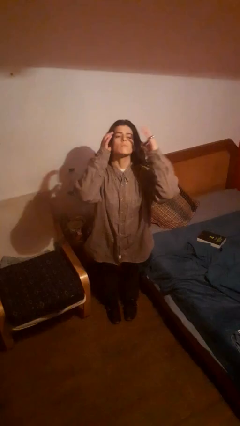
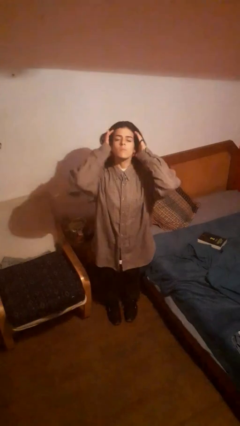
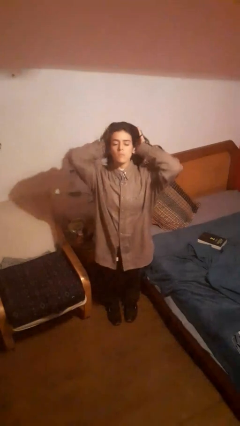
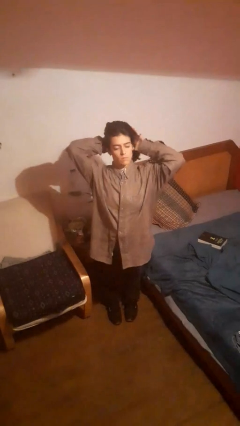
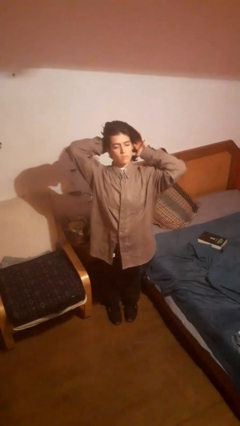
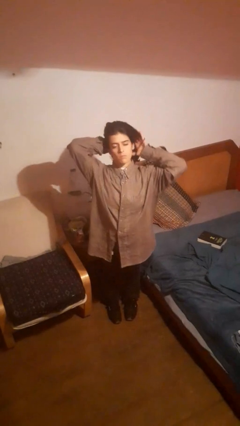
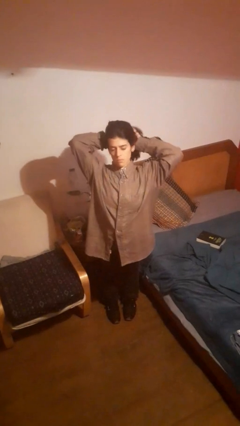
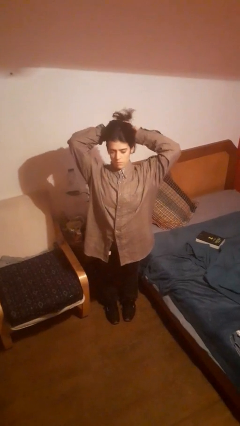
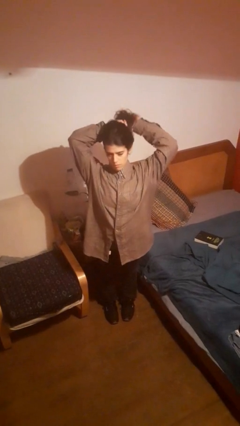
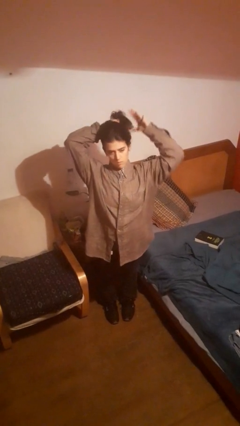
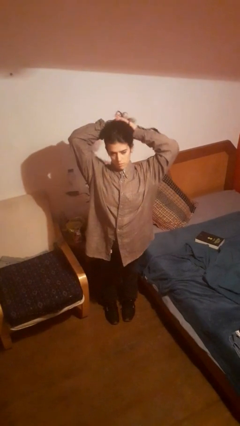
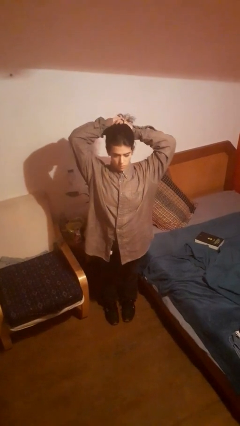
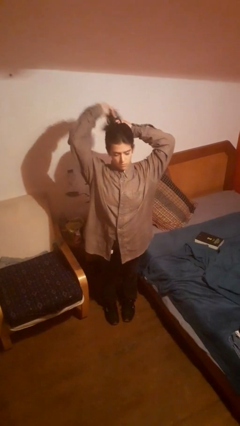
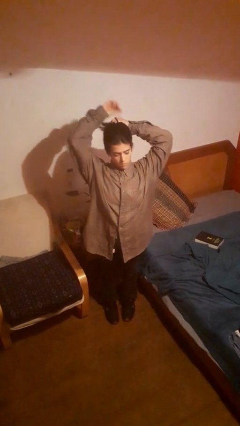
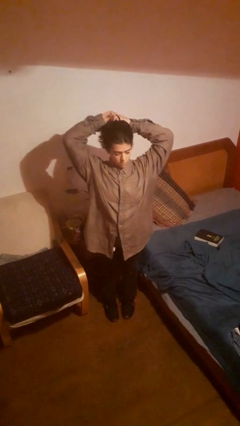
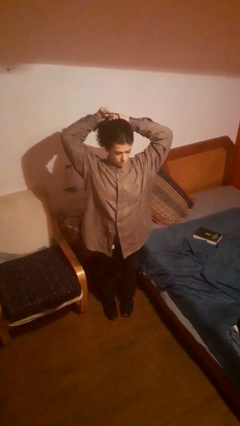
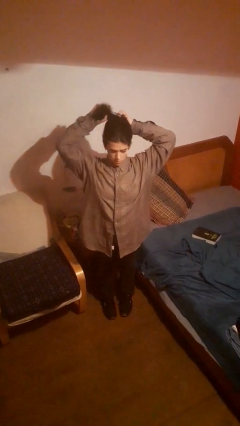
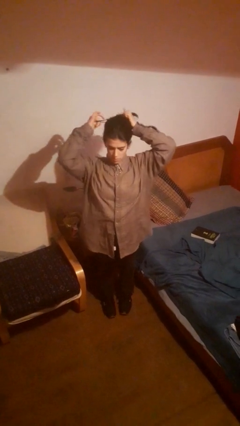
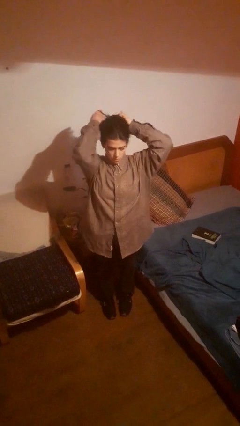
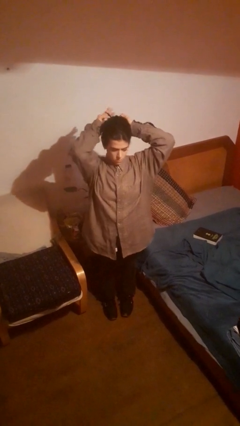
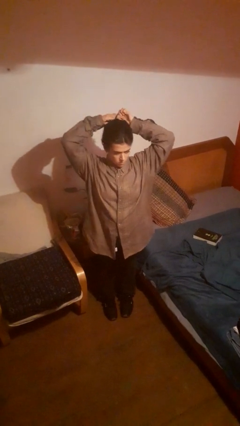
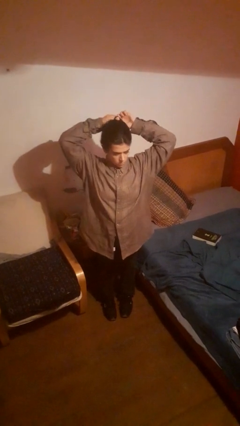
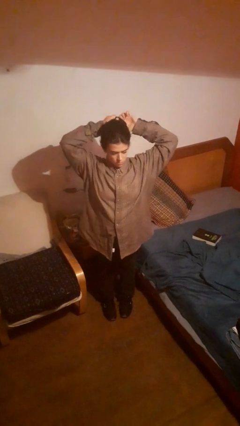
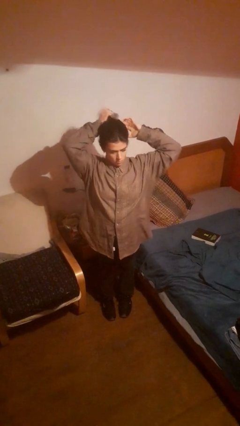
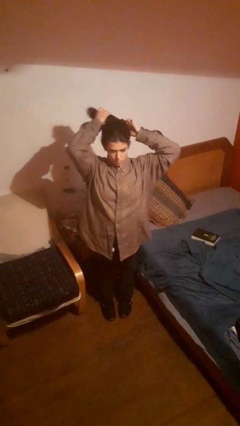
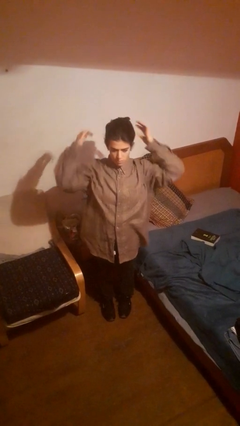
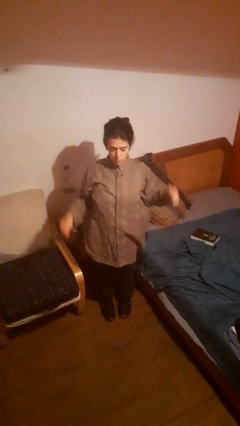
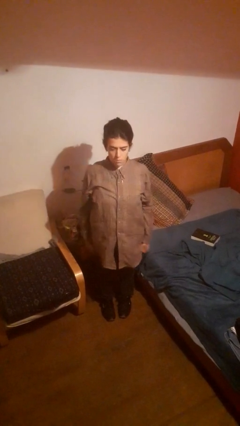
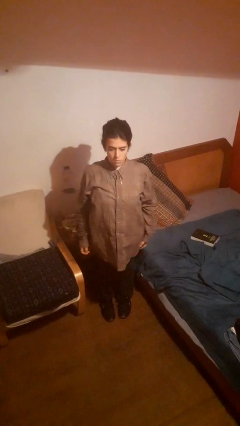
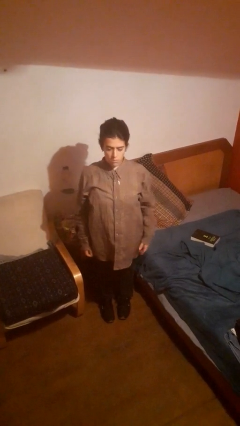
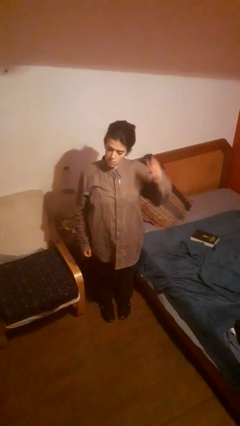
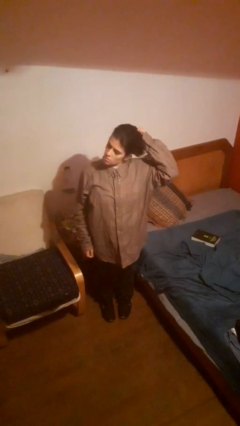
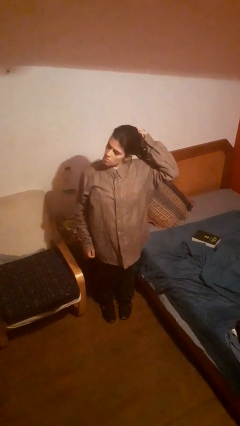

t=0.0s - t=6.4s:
person puts hair in ponytail

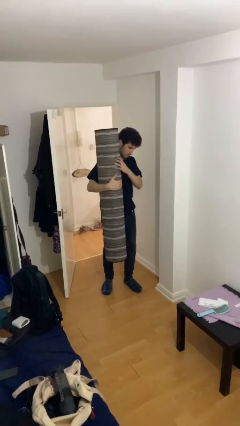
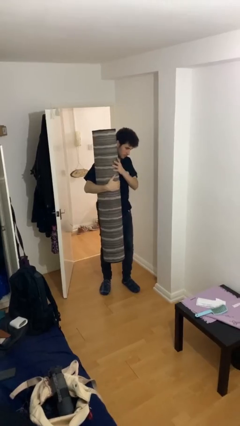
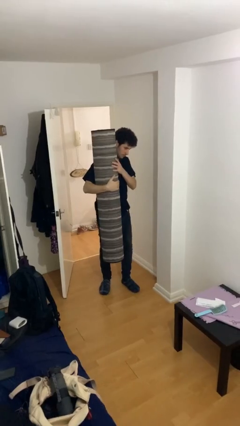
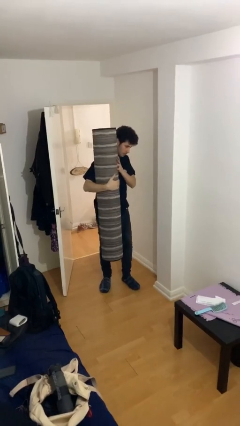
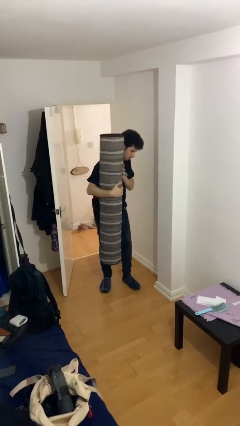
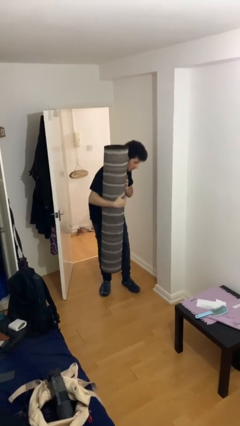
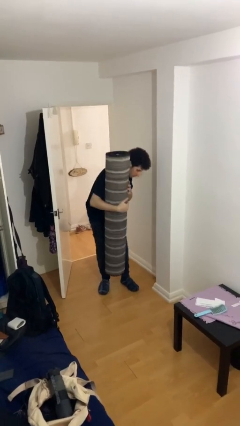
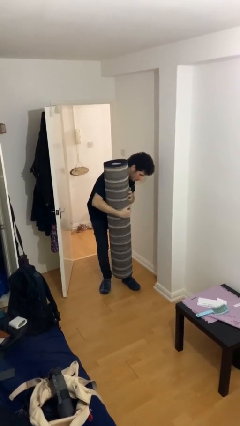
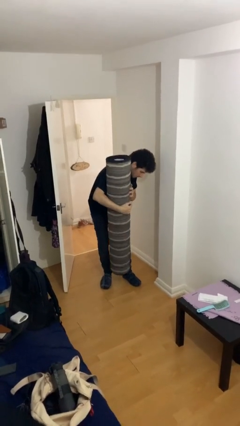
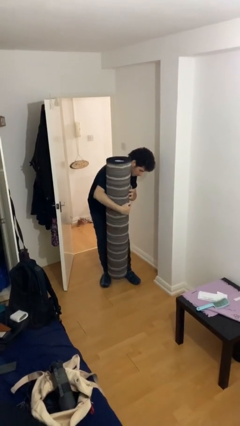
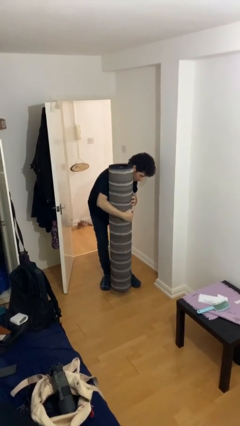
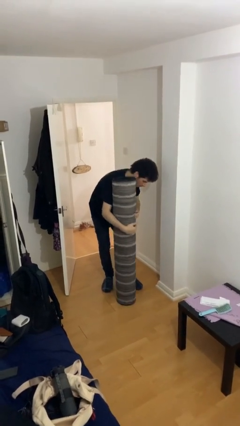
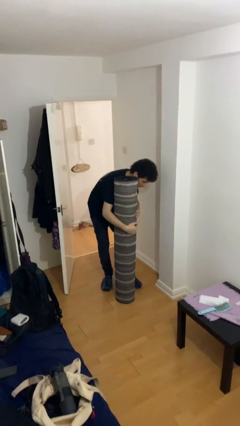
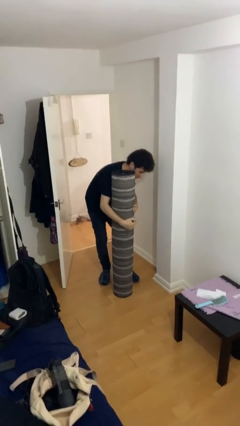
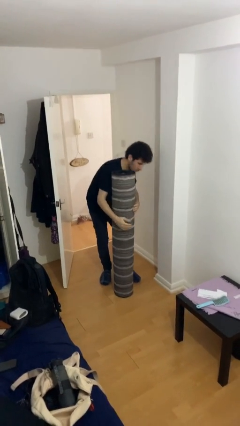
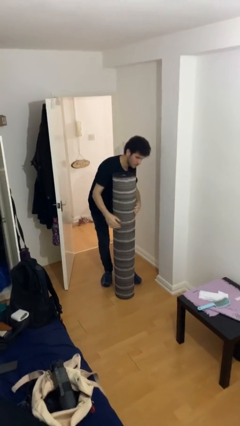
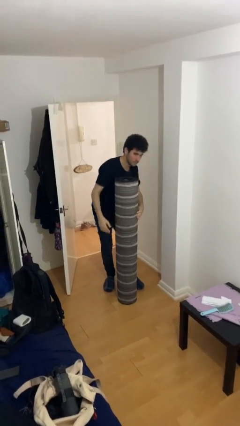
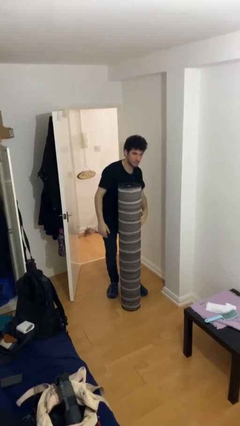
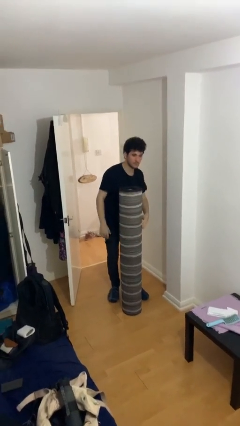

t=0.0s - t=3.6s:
person puts down object on floor

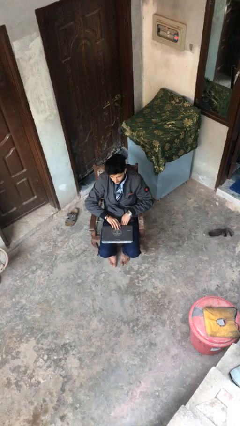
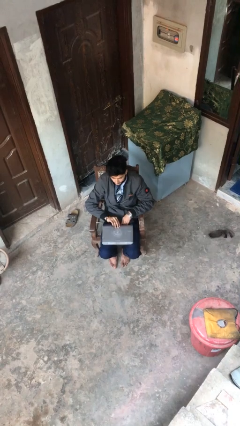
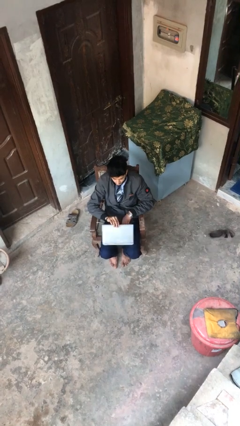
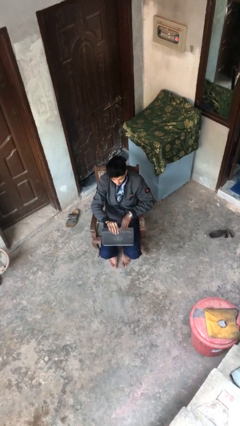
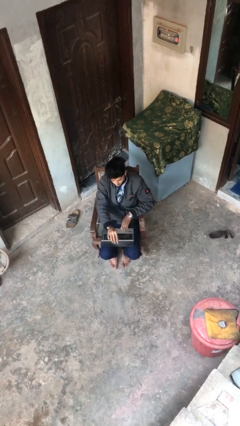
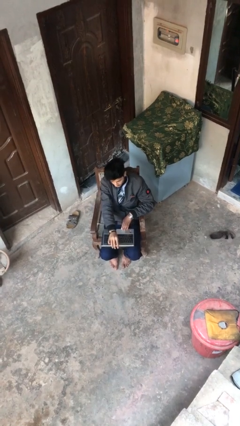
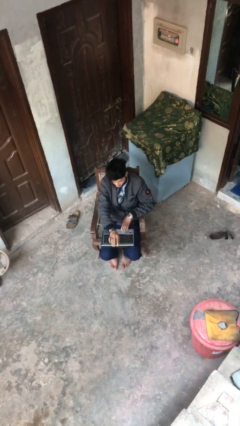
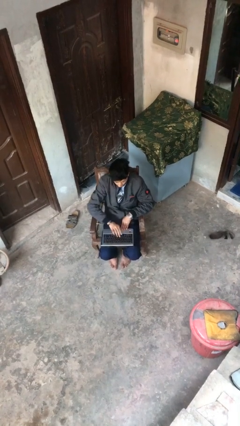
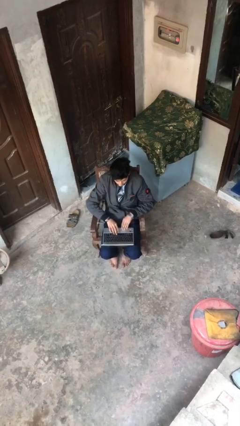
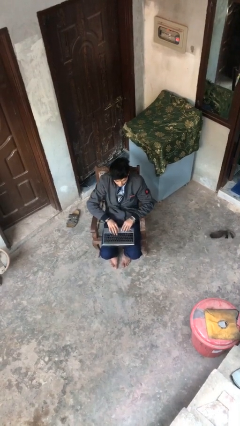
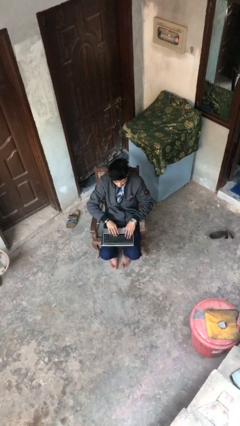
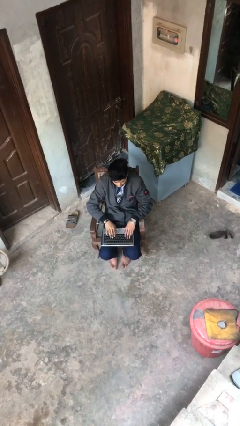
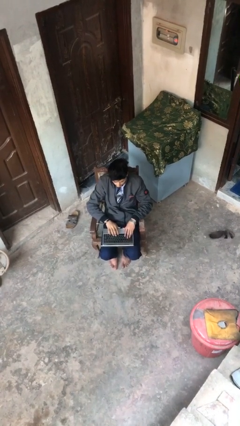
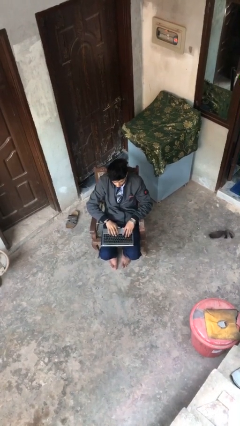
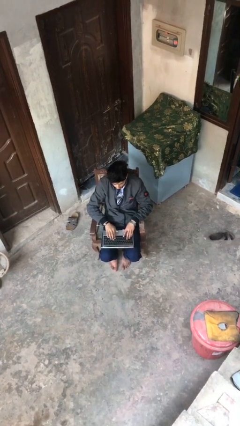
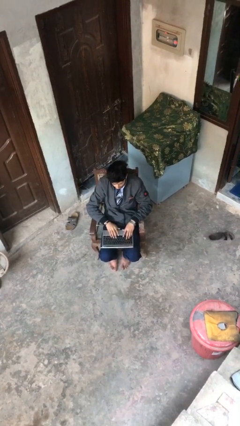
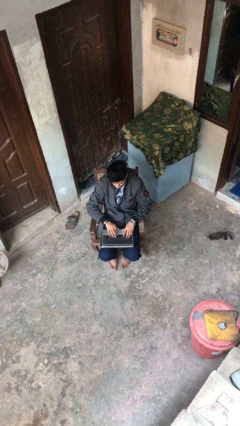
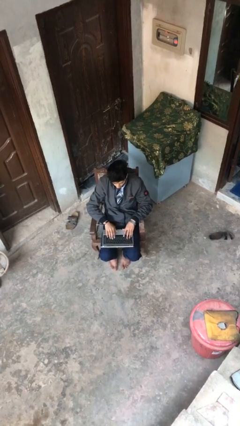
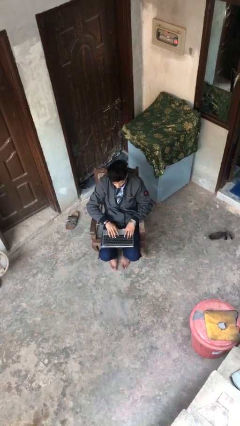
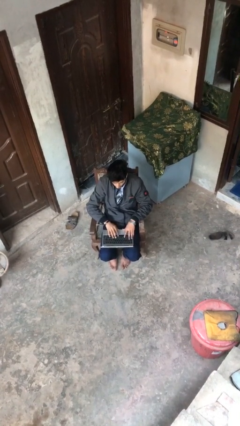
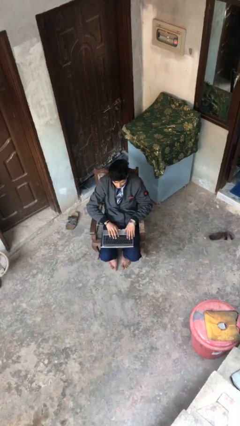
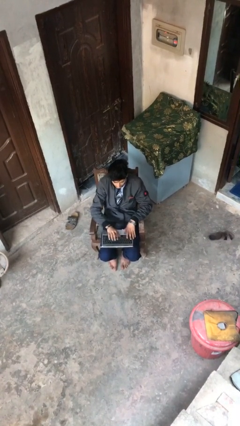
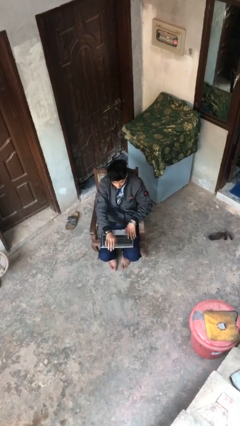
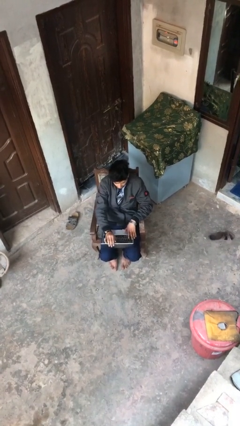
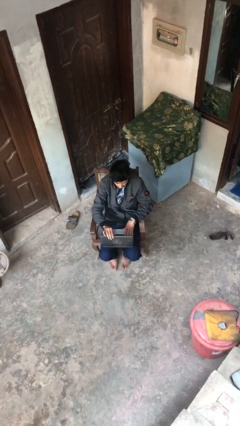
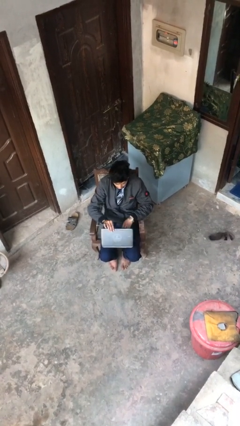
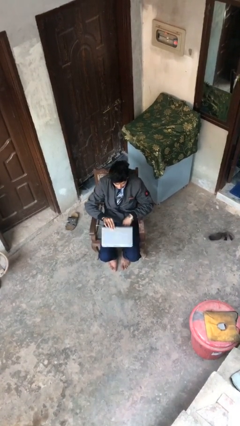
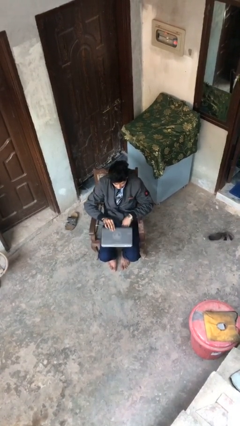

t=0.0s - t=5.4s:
person interacts with laptop

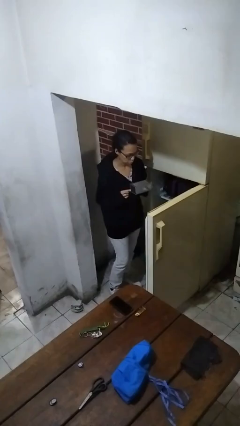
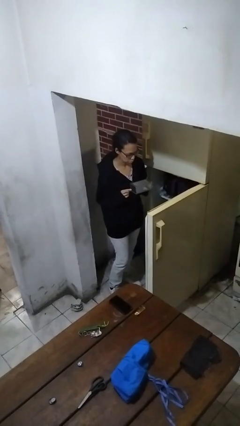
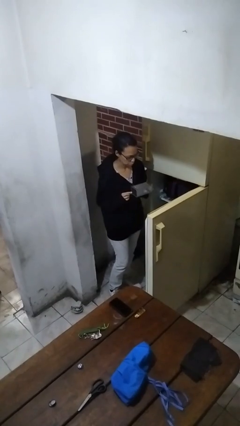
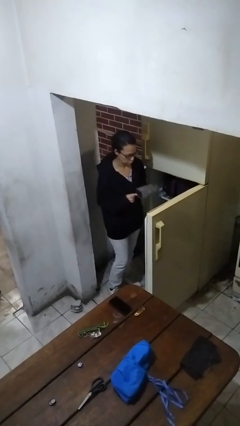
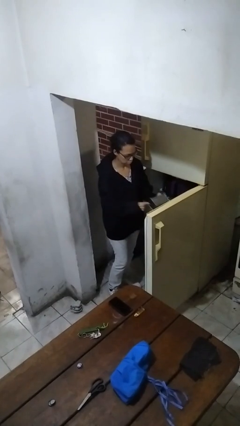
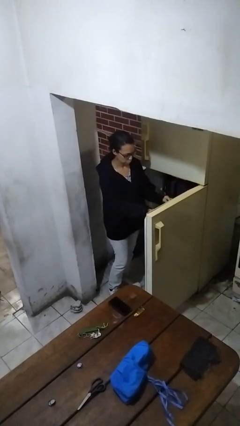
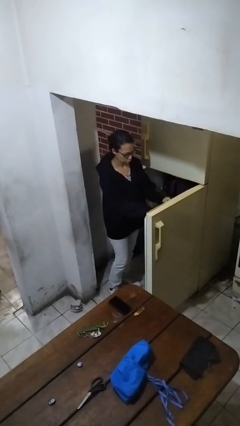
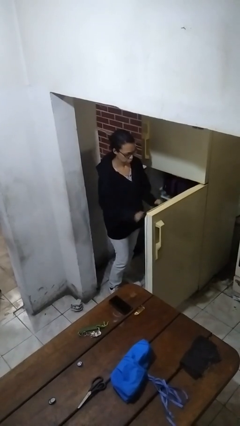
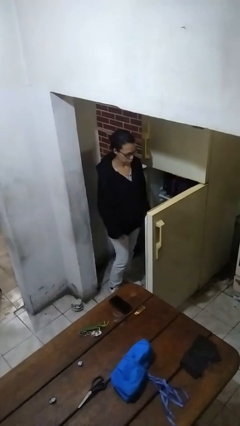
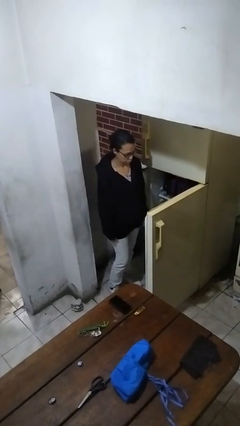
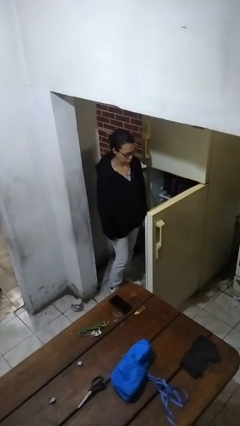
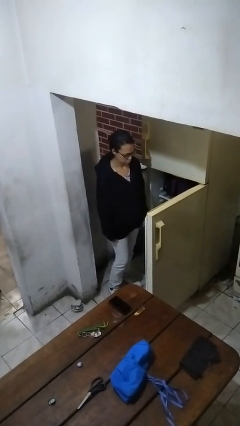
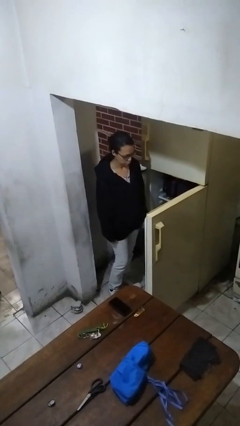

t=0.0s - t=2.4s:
person puts object into refrigerator
